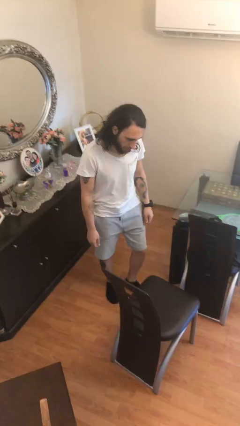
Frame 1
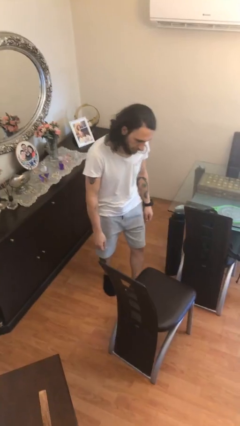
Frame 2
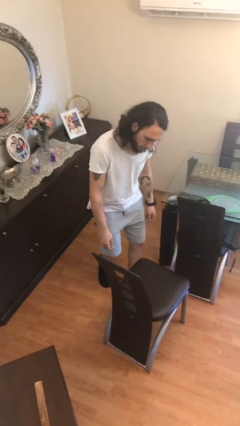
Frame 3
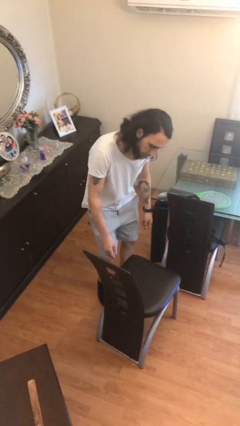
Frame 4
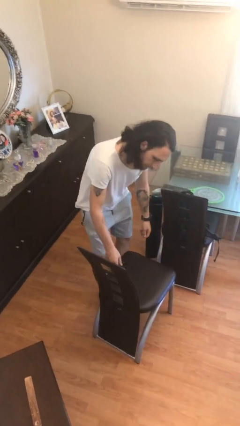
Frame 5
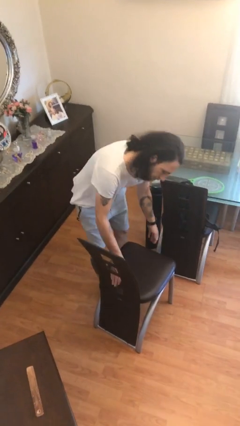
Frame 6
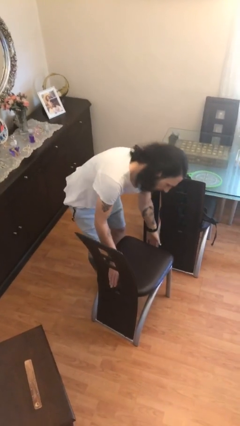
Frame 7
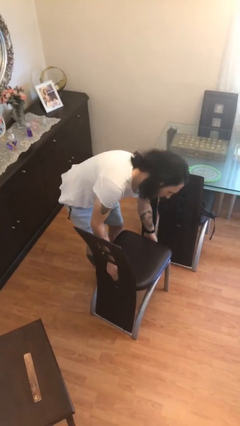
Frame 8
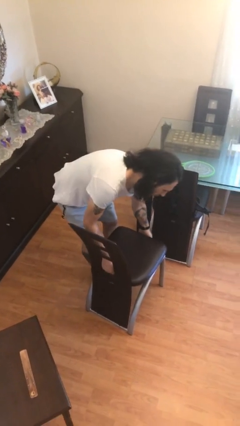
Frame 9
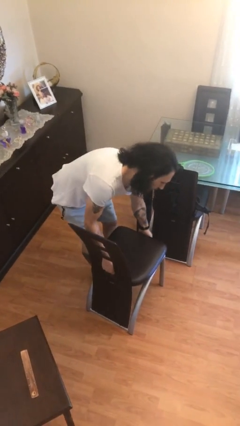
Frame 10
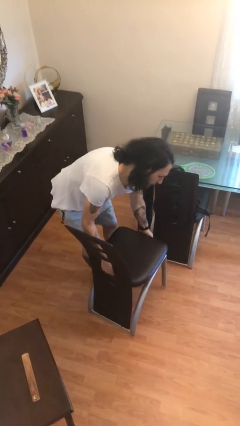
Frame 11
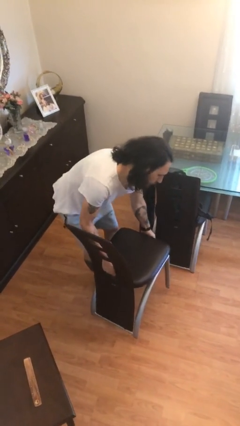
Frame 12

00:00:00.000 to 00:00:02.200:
person picks up object from floor

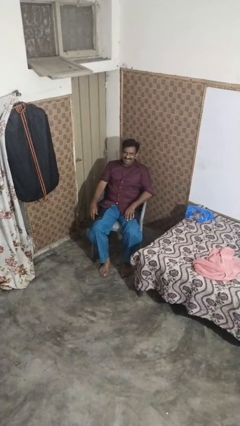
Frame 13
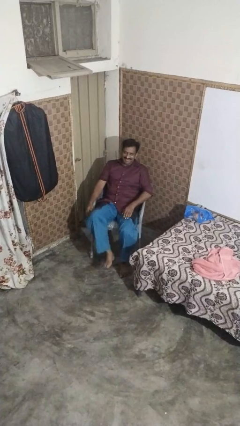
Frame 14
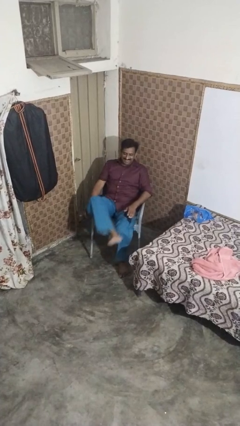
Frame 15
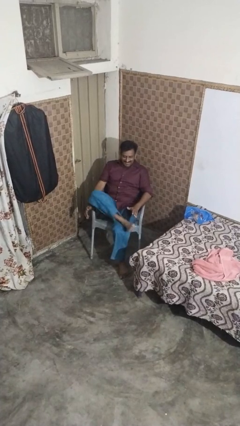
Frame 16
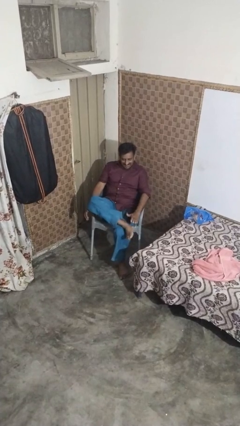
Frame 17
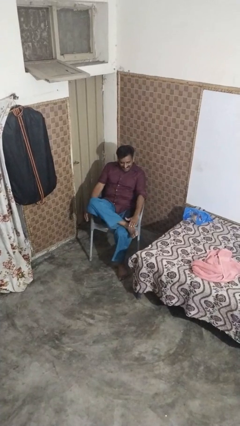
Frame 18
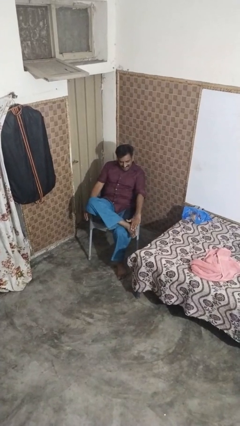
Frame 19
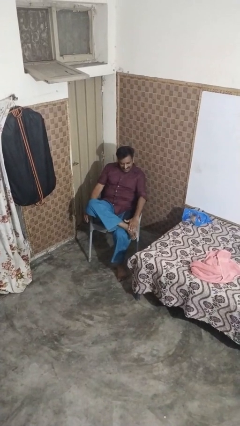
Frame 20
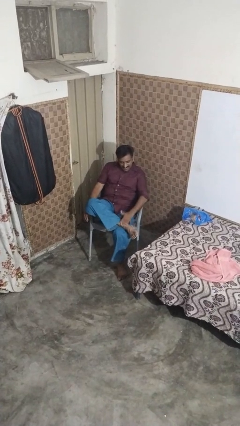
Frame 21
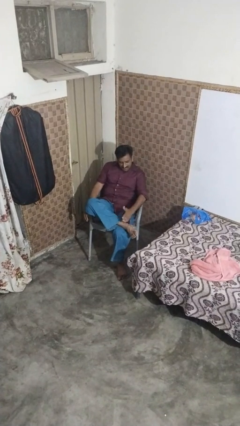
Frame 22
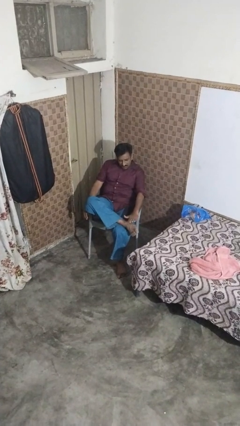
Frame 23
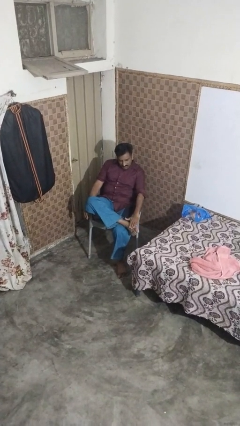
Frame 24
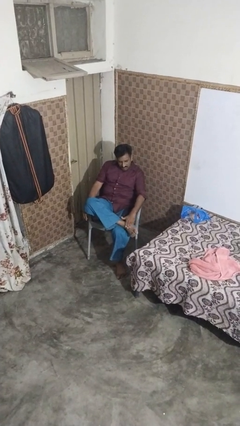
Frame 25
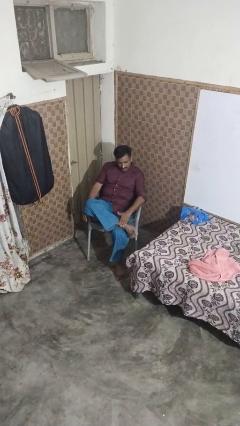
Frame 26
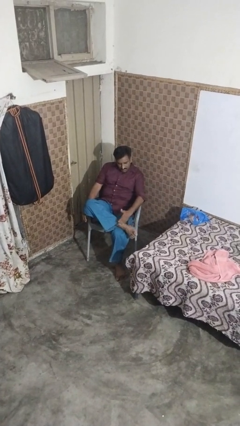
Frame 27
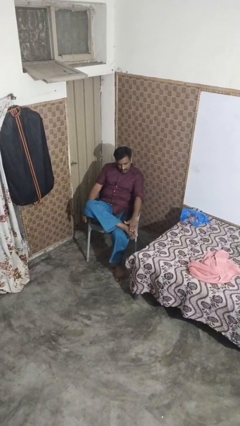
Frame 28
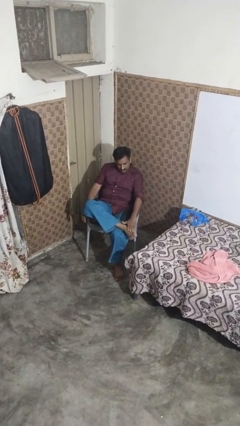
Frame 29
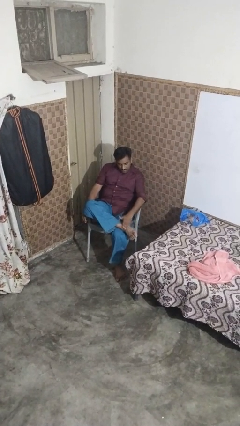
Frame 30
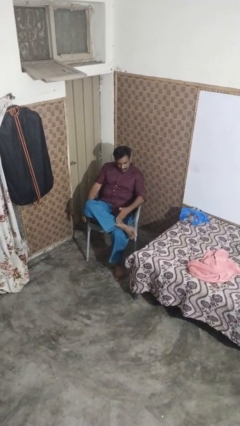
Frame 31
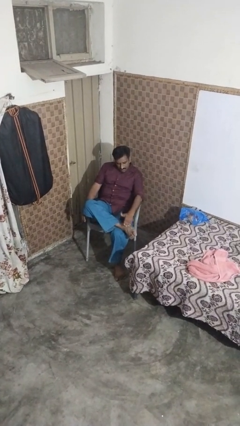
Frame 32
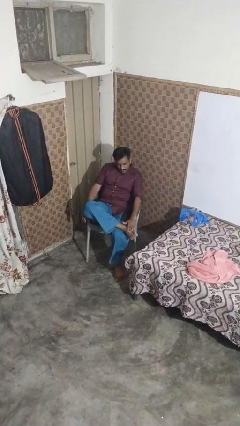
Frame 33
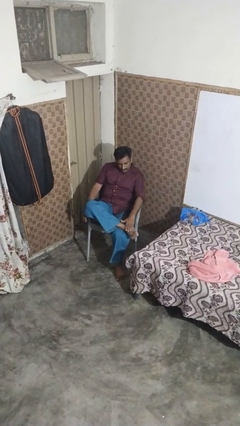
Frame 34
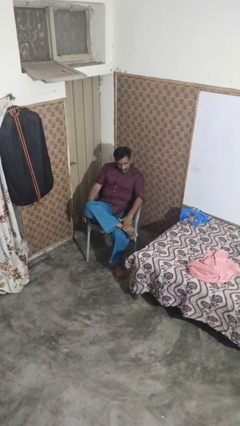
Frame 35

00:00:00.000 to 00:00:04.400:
person rubs foot

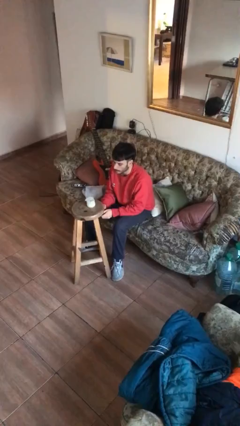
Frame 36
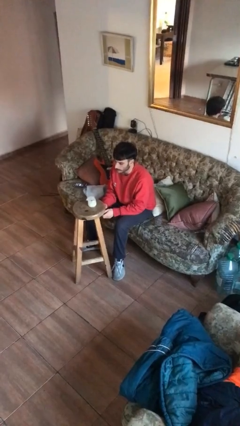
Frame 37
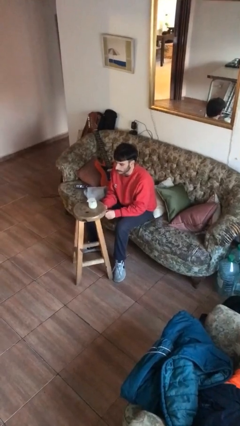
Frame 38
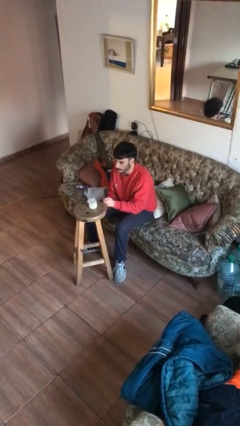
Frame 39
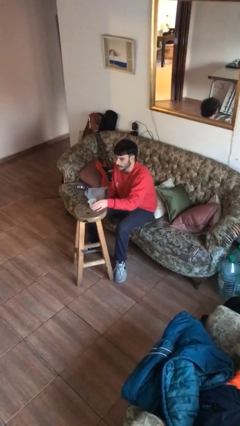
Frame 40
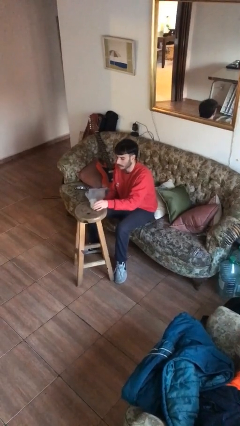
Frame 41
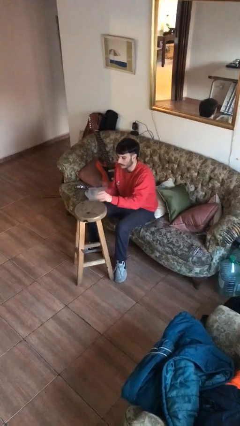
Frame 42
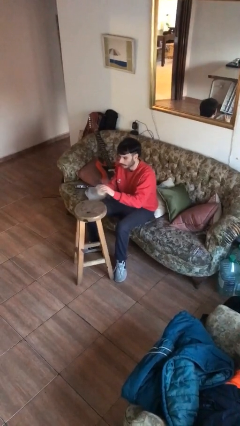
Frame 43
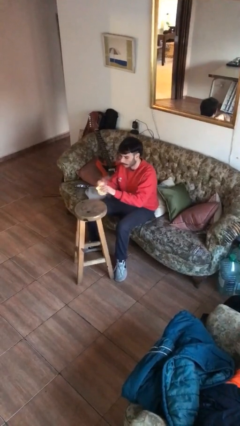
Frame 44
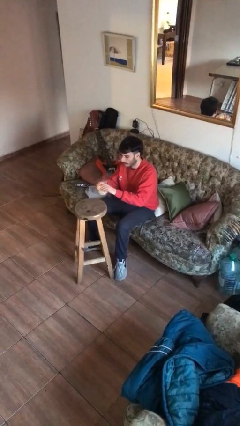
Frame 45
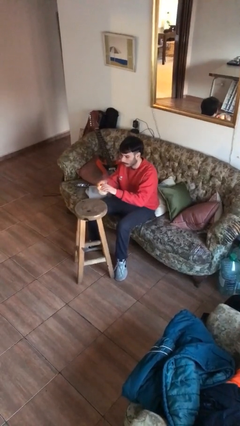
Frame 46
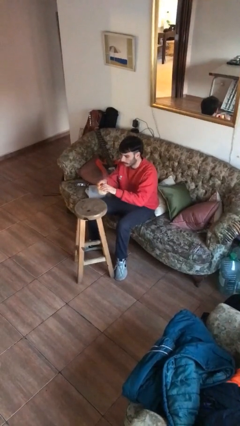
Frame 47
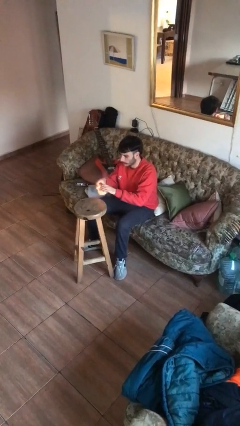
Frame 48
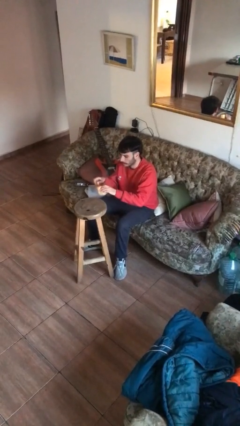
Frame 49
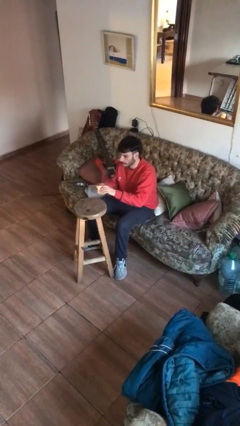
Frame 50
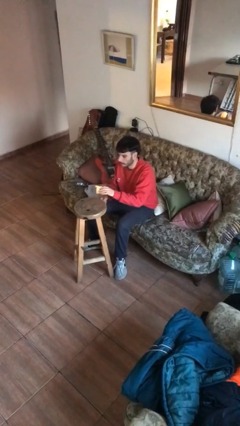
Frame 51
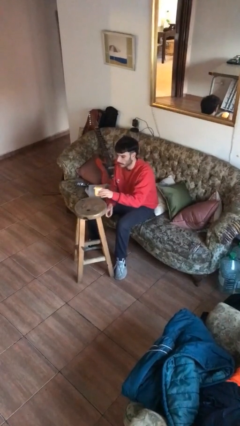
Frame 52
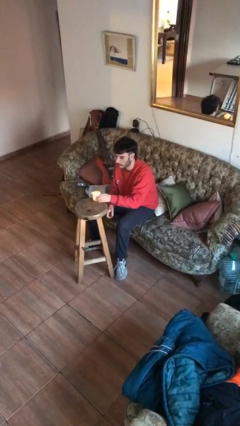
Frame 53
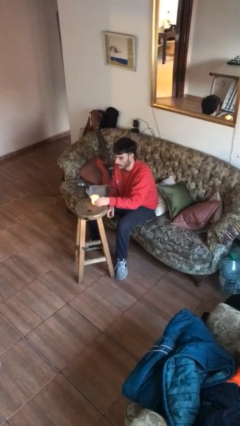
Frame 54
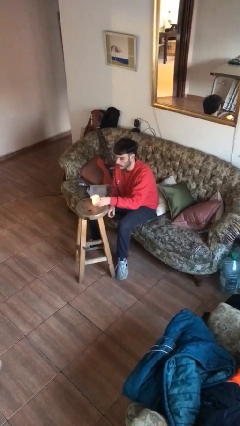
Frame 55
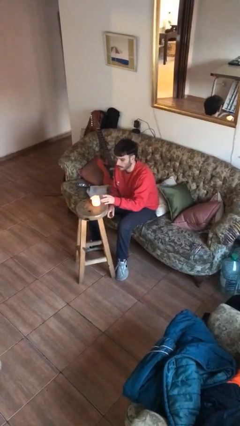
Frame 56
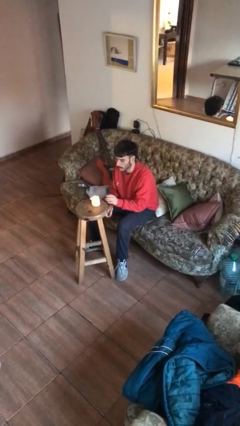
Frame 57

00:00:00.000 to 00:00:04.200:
person lights candle

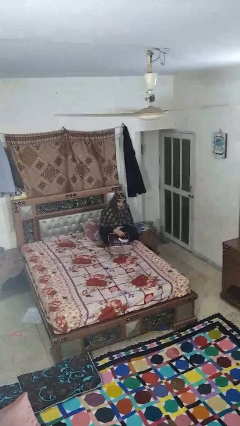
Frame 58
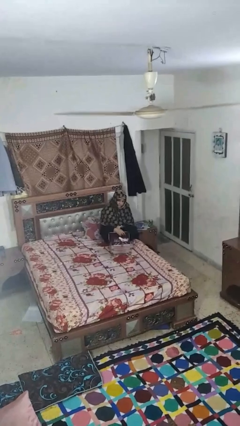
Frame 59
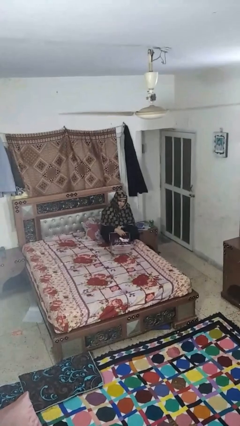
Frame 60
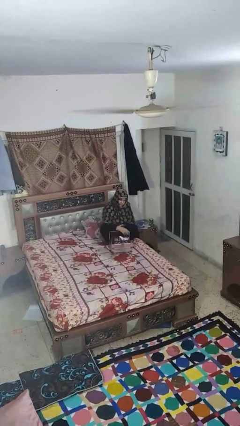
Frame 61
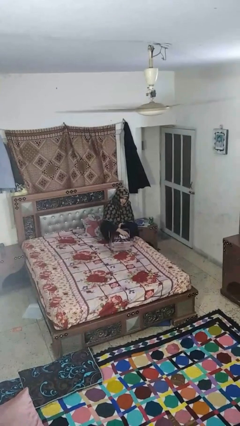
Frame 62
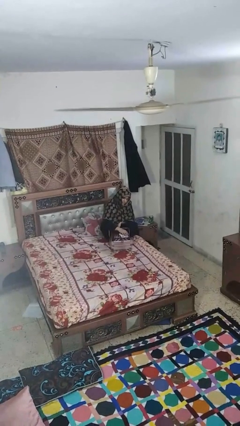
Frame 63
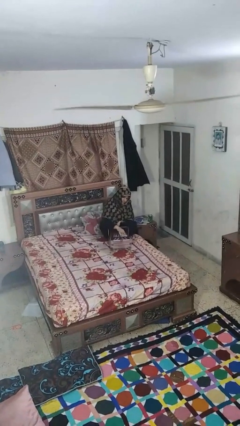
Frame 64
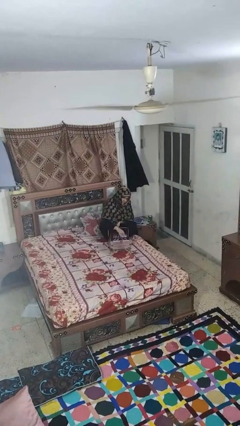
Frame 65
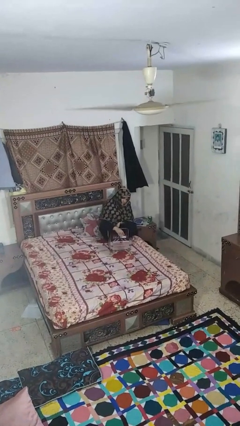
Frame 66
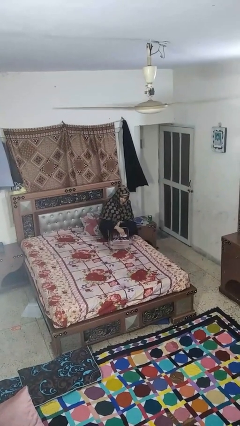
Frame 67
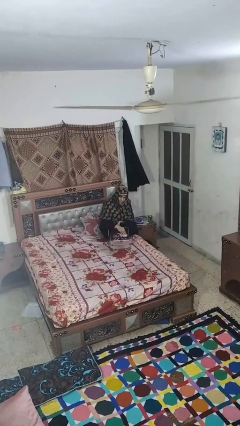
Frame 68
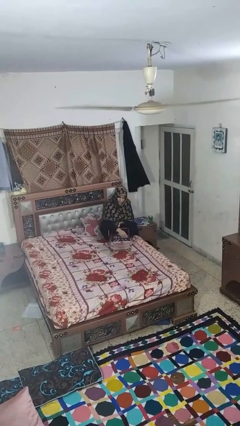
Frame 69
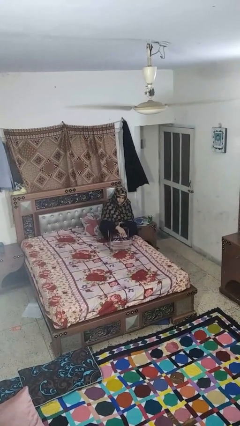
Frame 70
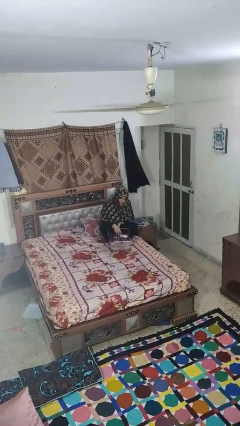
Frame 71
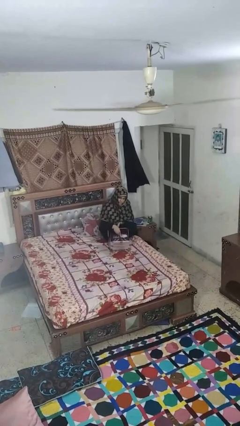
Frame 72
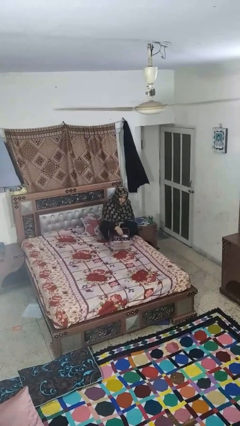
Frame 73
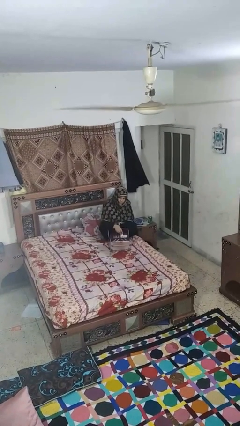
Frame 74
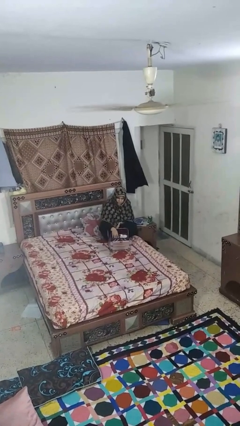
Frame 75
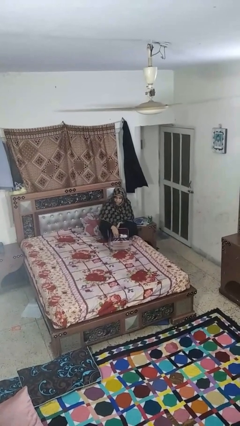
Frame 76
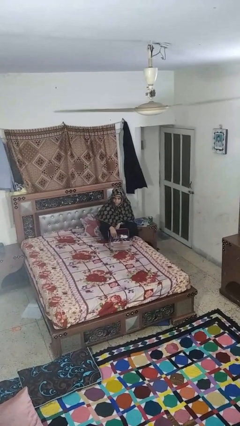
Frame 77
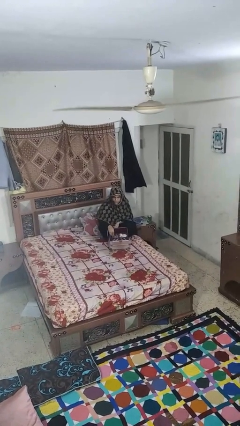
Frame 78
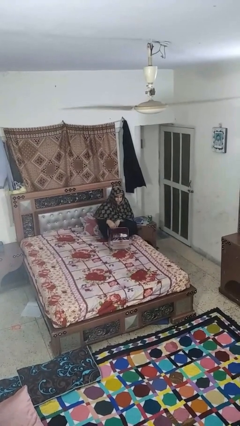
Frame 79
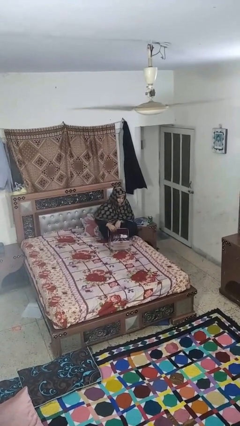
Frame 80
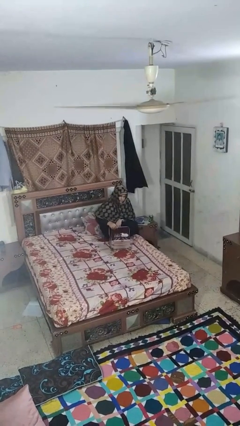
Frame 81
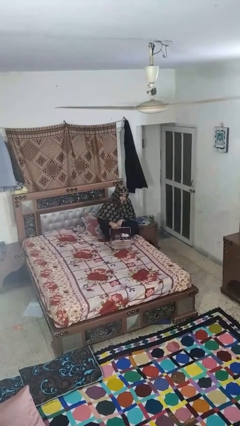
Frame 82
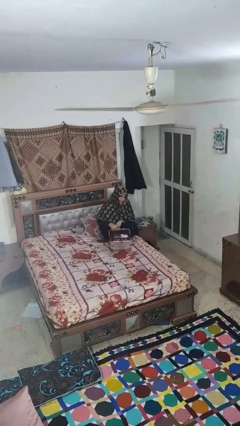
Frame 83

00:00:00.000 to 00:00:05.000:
person searches jewelry box

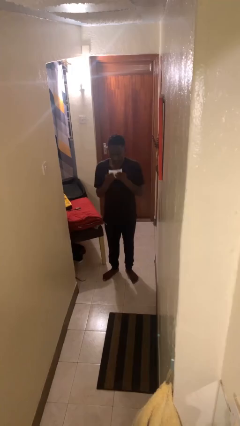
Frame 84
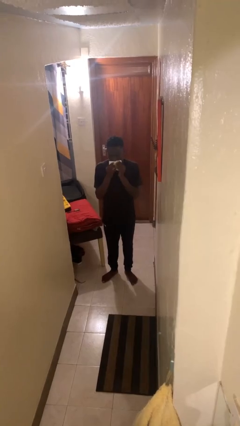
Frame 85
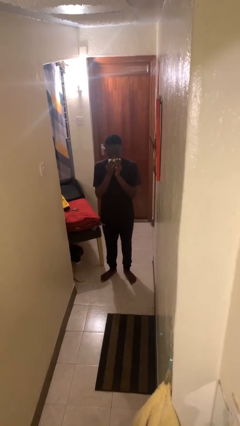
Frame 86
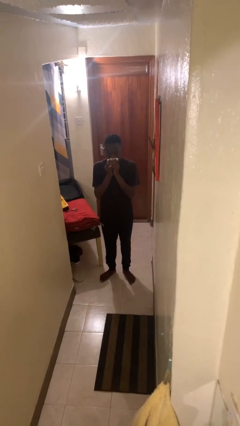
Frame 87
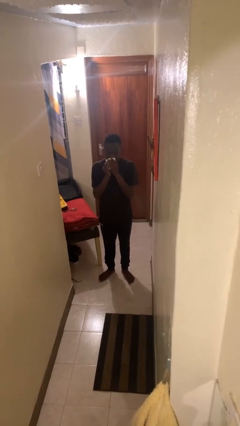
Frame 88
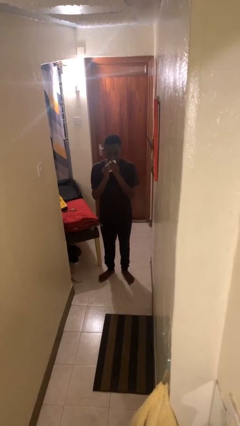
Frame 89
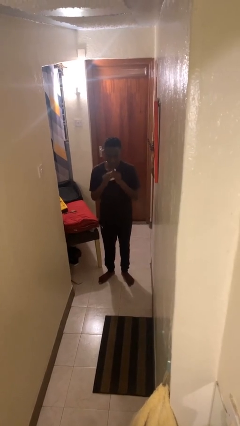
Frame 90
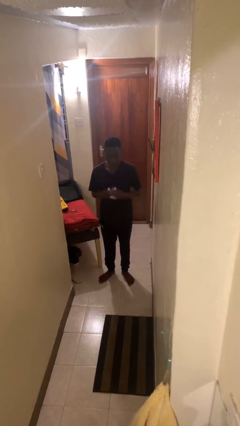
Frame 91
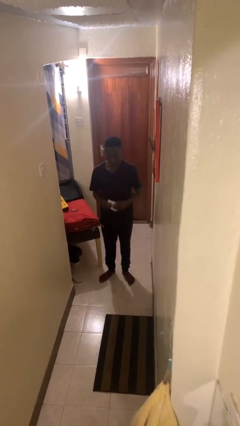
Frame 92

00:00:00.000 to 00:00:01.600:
person wipes mouth with napkin

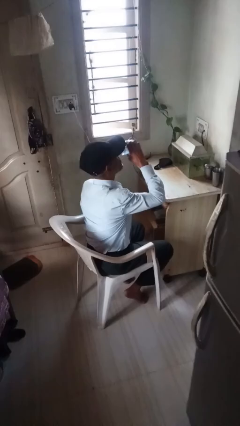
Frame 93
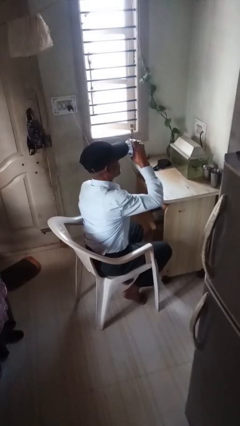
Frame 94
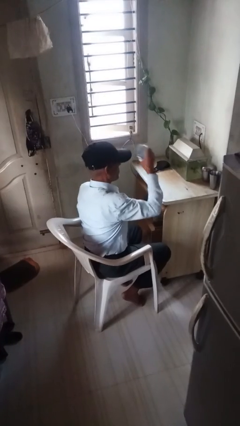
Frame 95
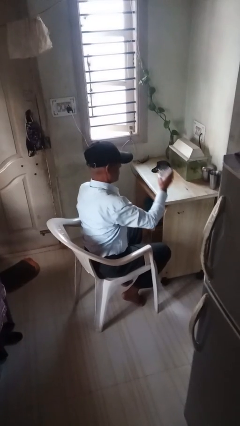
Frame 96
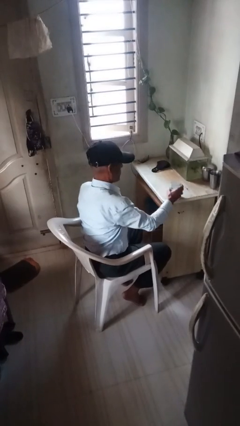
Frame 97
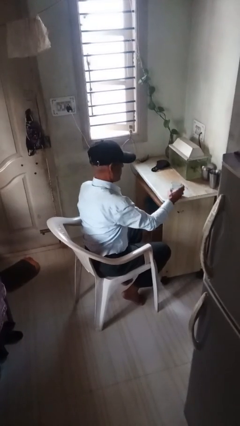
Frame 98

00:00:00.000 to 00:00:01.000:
person puts down object on table
